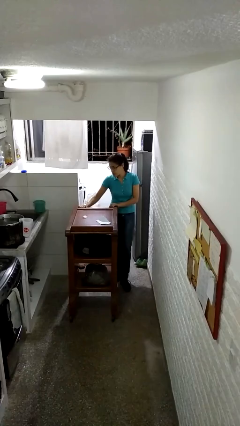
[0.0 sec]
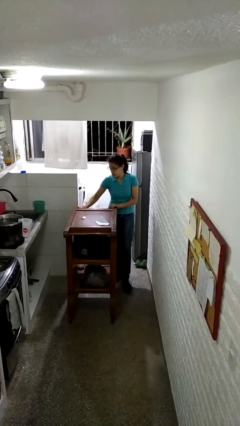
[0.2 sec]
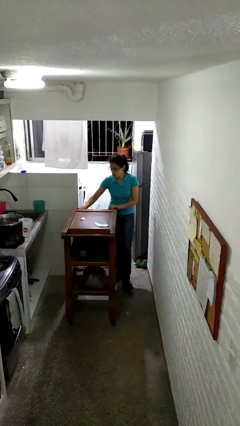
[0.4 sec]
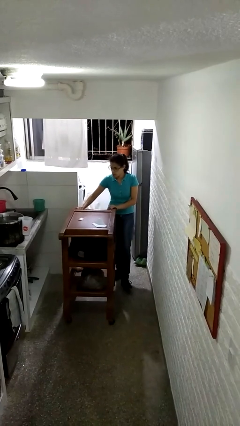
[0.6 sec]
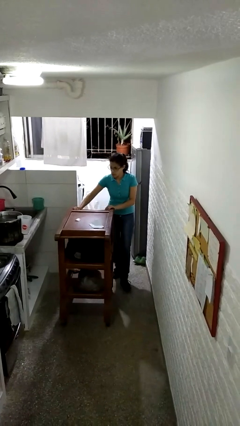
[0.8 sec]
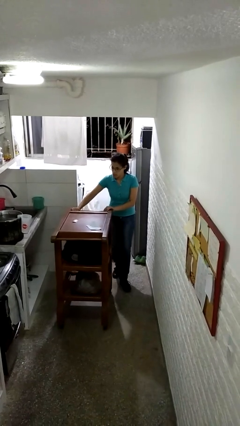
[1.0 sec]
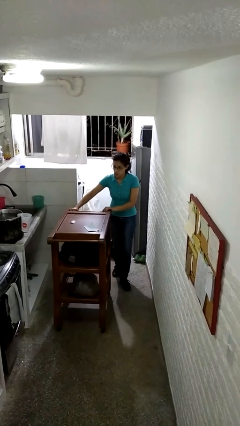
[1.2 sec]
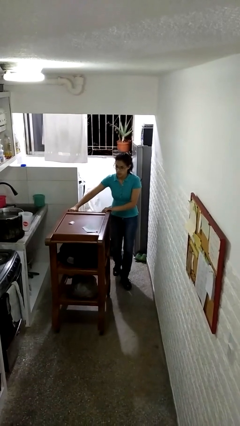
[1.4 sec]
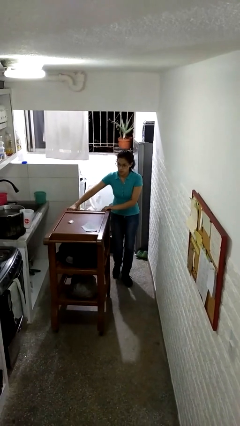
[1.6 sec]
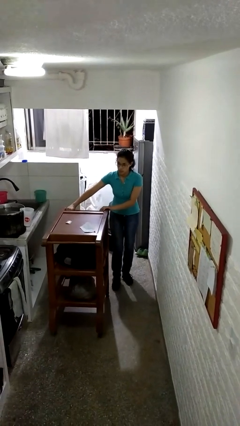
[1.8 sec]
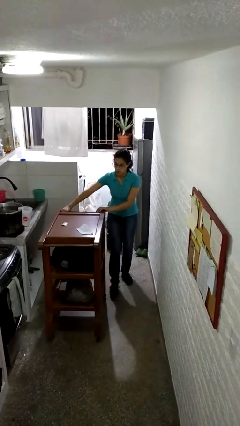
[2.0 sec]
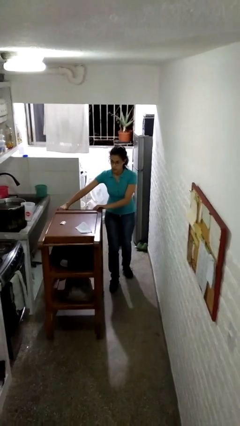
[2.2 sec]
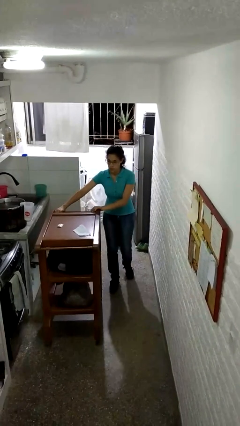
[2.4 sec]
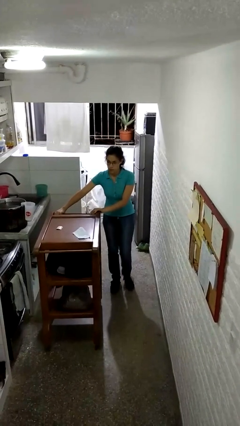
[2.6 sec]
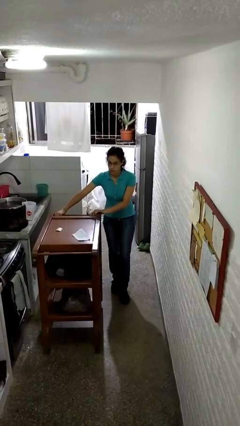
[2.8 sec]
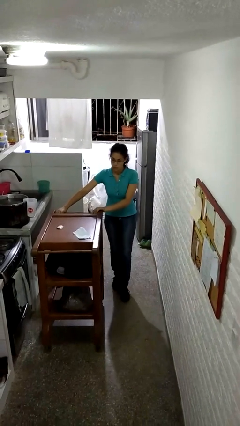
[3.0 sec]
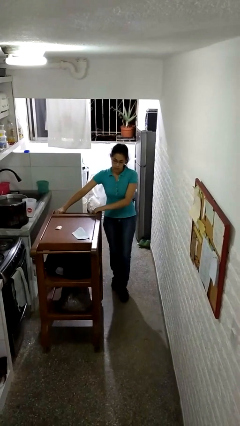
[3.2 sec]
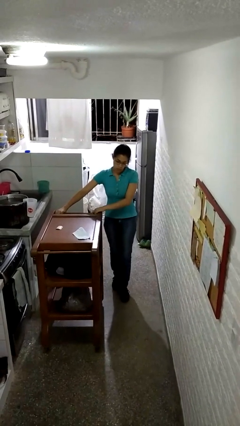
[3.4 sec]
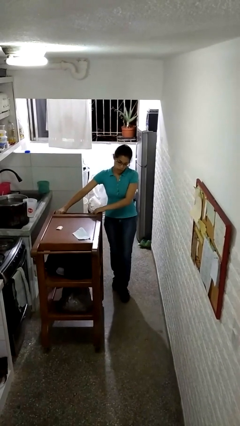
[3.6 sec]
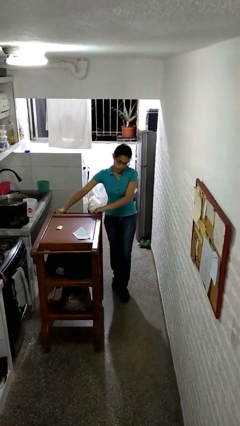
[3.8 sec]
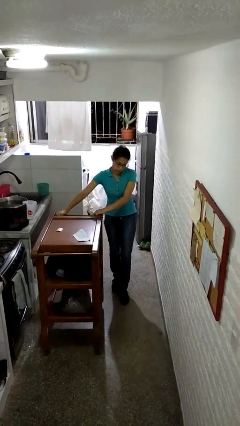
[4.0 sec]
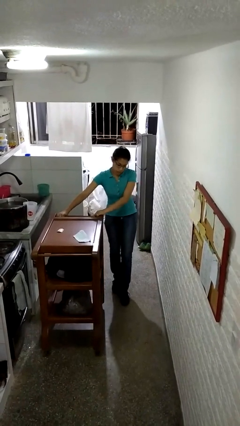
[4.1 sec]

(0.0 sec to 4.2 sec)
person pushes wheeled cart

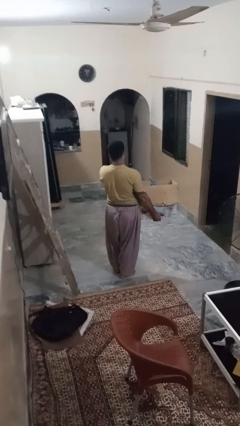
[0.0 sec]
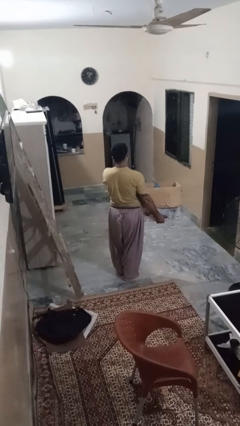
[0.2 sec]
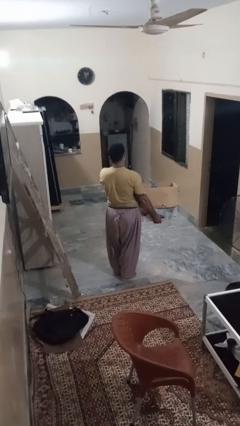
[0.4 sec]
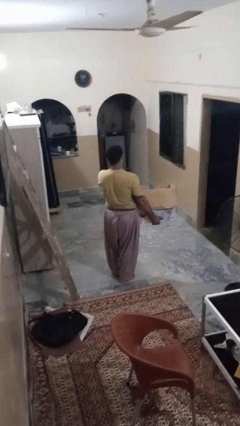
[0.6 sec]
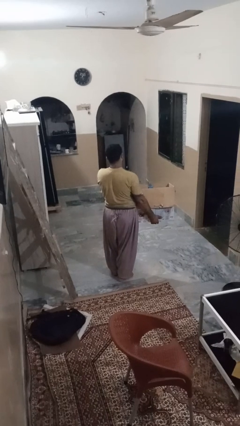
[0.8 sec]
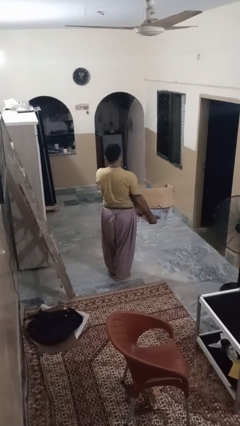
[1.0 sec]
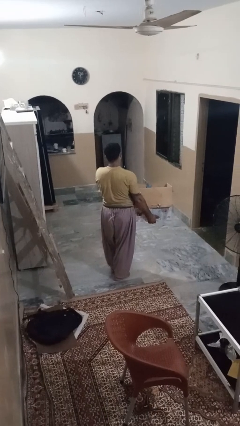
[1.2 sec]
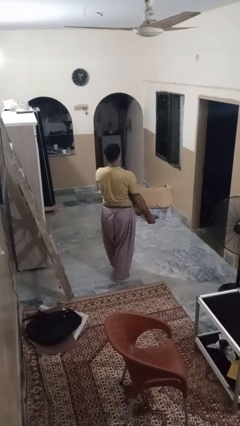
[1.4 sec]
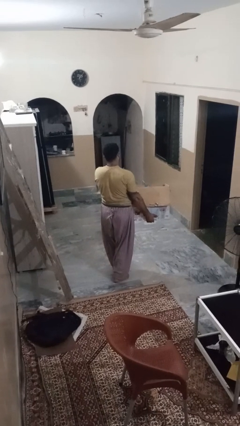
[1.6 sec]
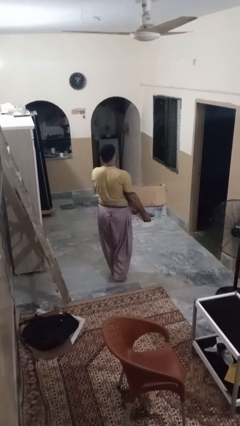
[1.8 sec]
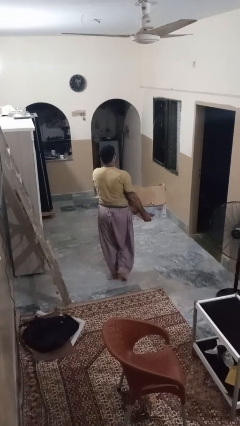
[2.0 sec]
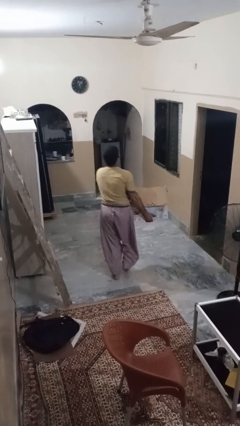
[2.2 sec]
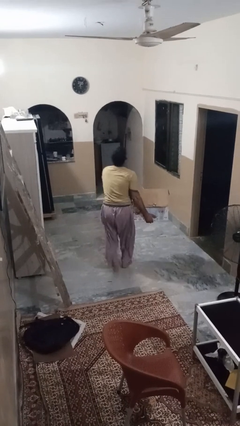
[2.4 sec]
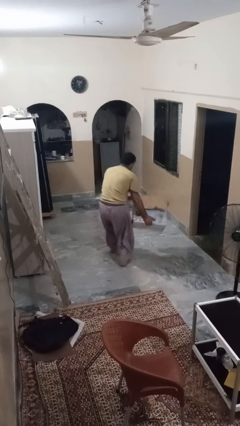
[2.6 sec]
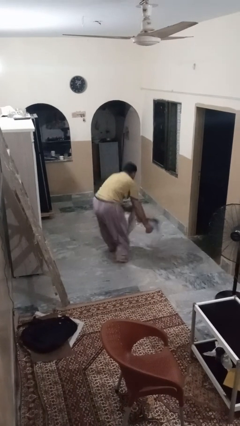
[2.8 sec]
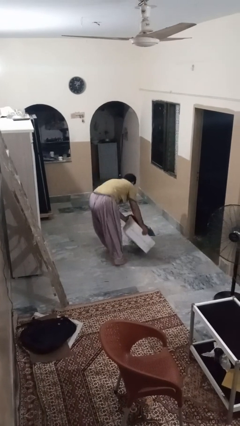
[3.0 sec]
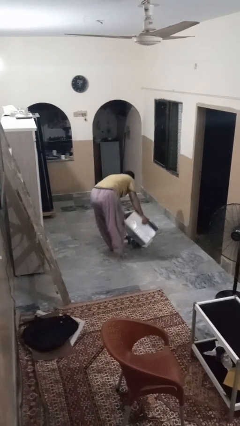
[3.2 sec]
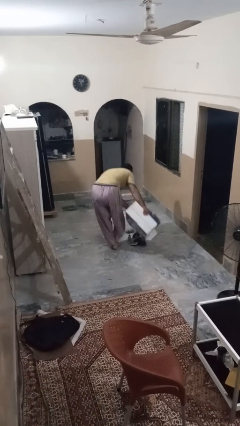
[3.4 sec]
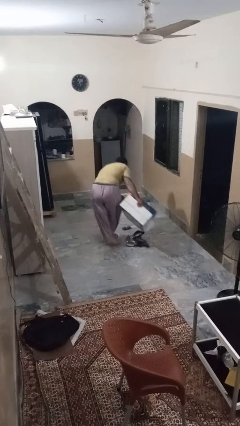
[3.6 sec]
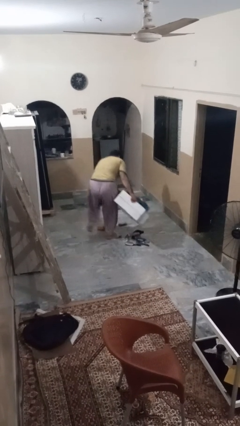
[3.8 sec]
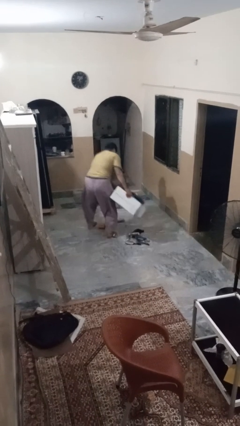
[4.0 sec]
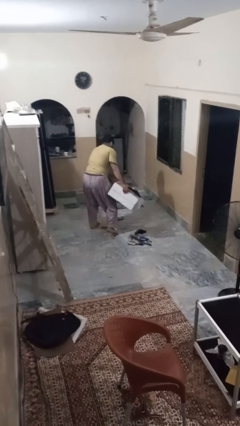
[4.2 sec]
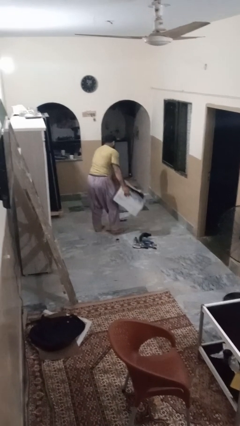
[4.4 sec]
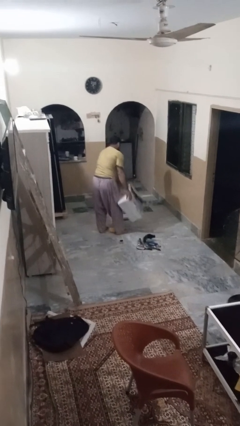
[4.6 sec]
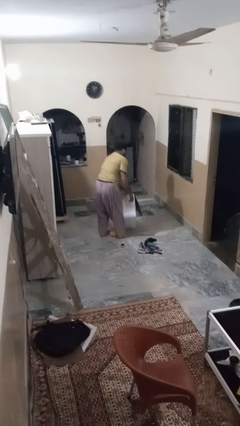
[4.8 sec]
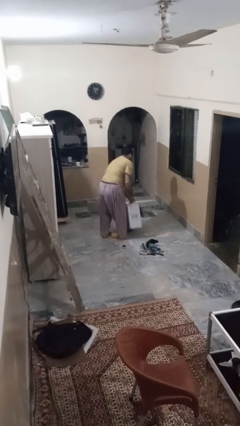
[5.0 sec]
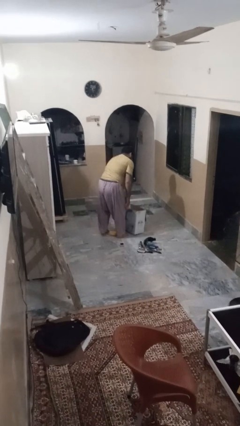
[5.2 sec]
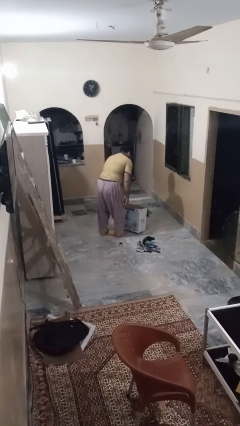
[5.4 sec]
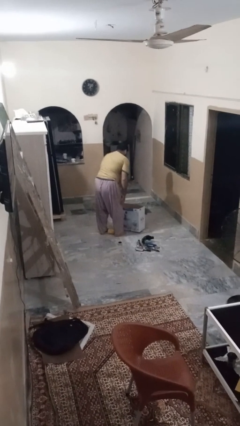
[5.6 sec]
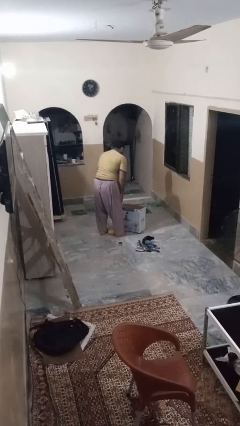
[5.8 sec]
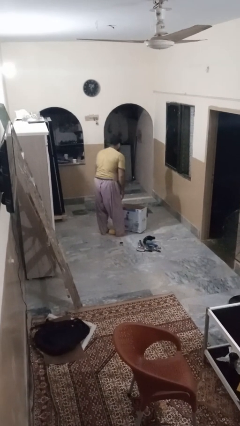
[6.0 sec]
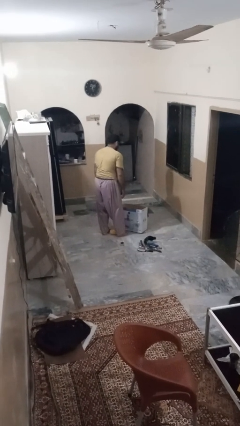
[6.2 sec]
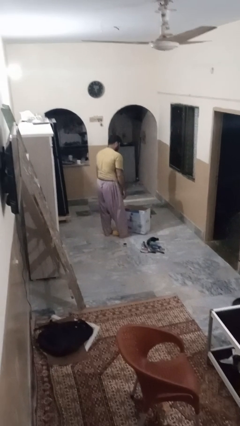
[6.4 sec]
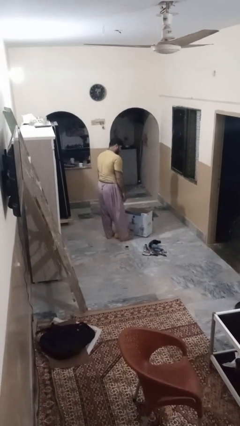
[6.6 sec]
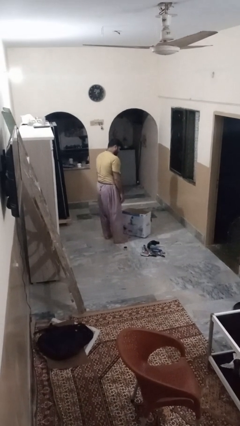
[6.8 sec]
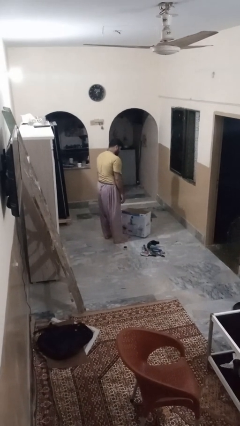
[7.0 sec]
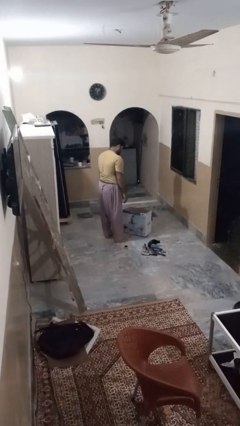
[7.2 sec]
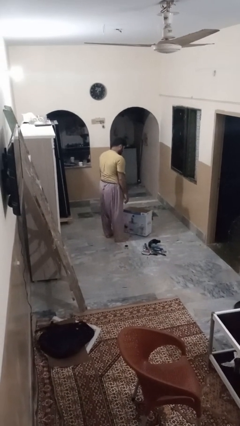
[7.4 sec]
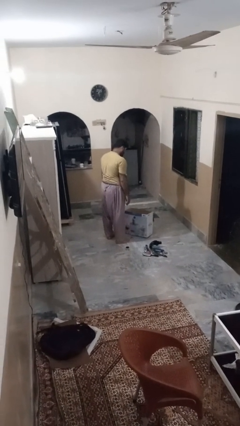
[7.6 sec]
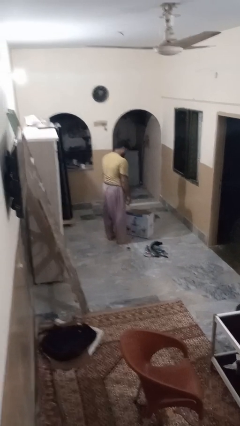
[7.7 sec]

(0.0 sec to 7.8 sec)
person unloads box onto floor

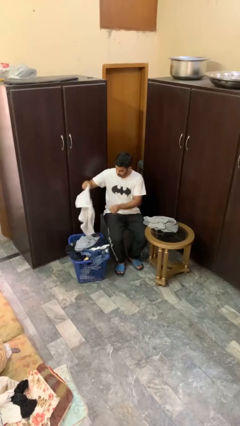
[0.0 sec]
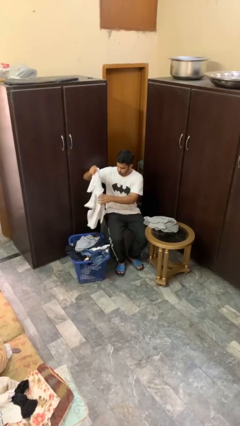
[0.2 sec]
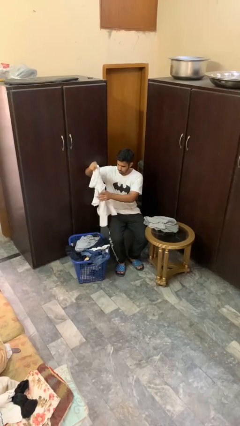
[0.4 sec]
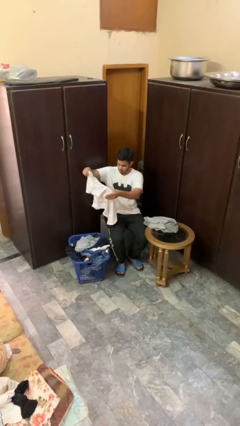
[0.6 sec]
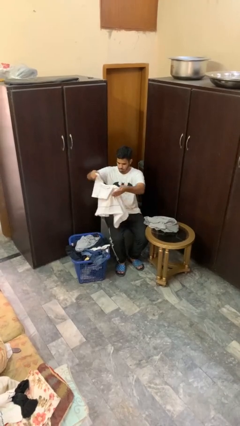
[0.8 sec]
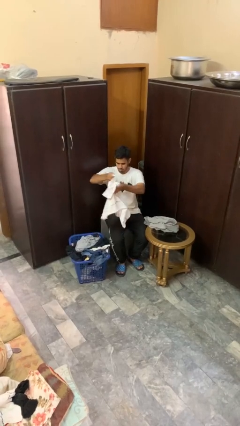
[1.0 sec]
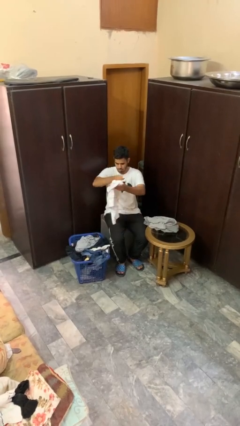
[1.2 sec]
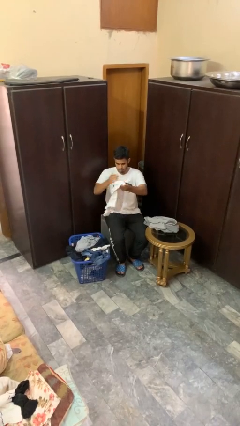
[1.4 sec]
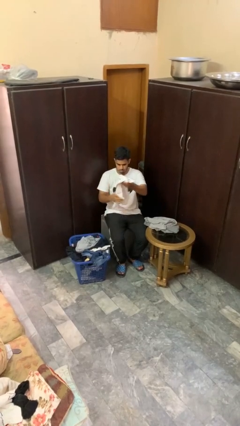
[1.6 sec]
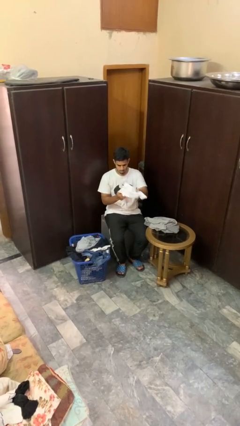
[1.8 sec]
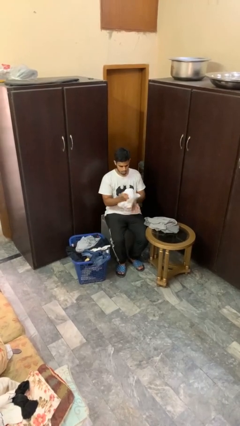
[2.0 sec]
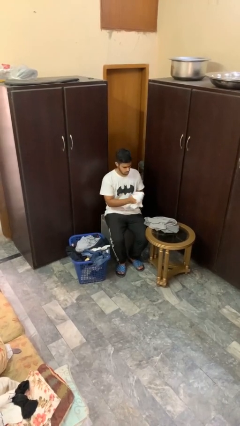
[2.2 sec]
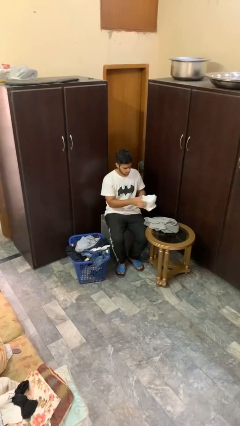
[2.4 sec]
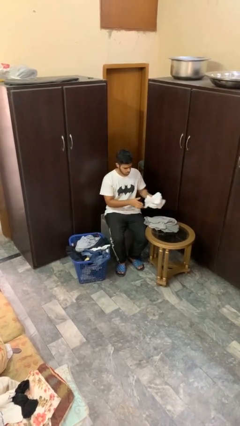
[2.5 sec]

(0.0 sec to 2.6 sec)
person folds shirt

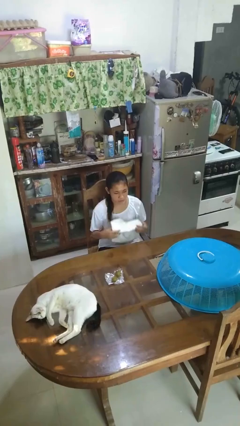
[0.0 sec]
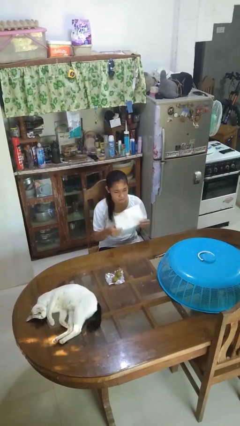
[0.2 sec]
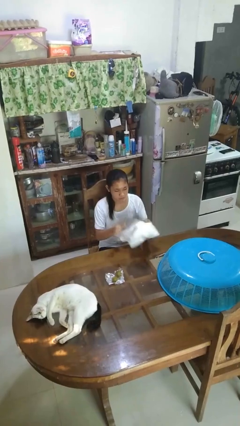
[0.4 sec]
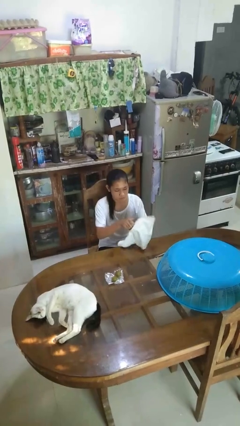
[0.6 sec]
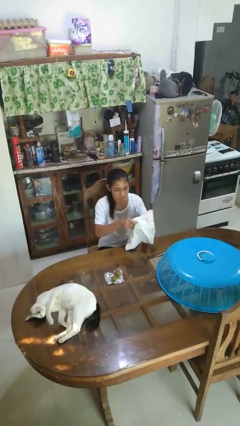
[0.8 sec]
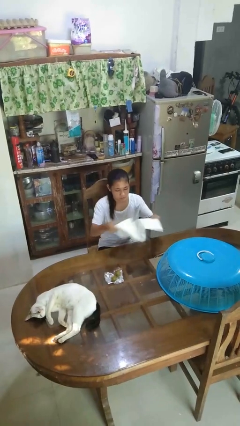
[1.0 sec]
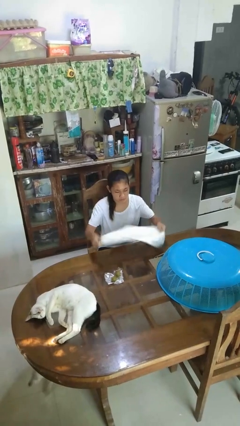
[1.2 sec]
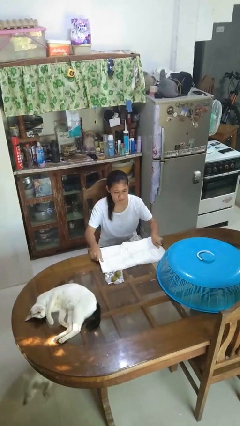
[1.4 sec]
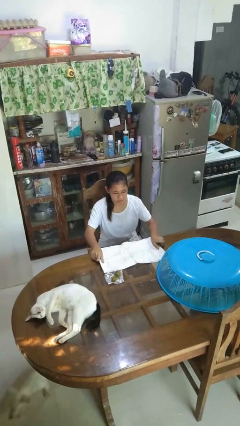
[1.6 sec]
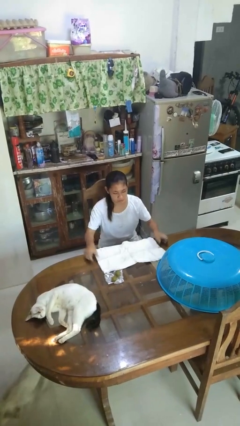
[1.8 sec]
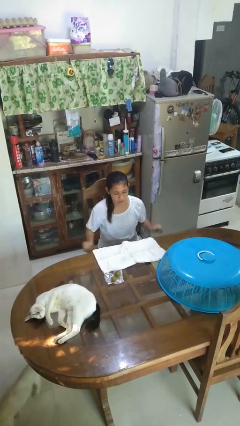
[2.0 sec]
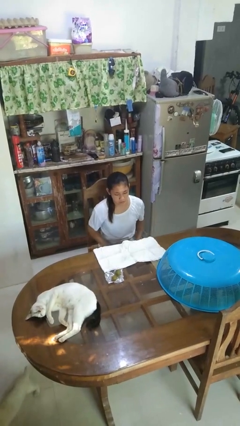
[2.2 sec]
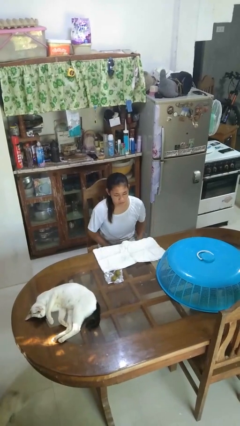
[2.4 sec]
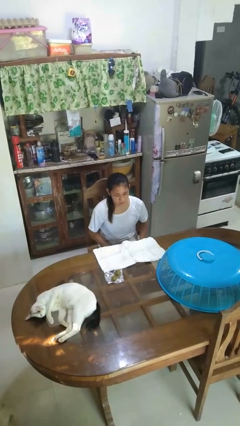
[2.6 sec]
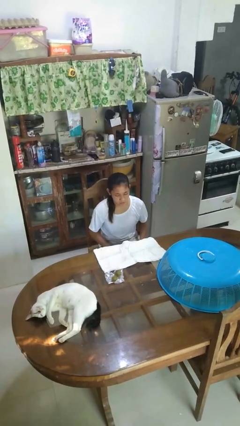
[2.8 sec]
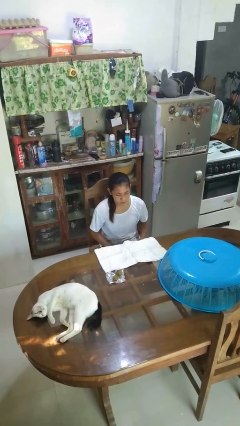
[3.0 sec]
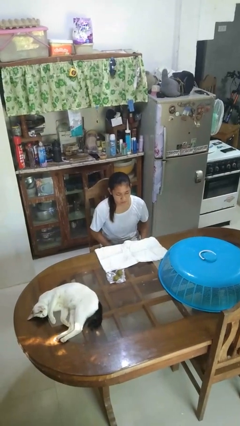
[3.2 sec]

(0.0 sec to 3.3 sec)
person spreads tablecloth
